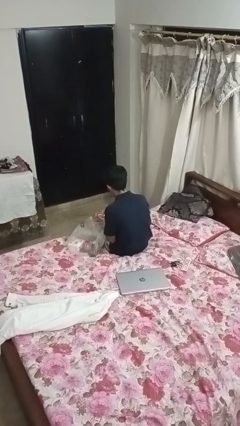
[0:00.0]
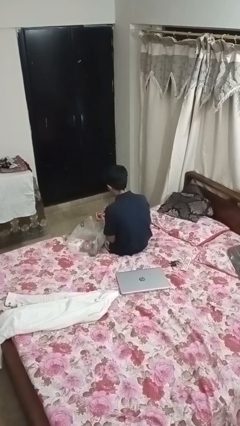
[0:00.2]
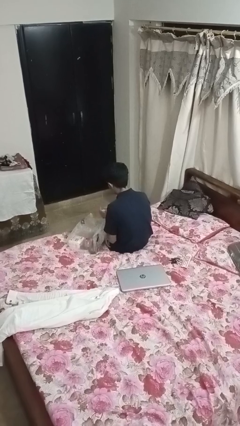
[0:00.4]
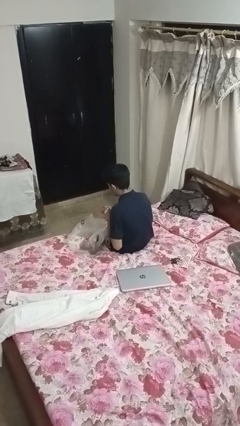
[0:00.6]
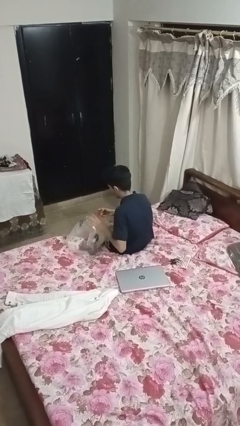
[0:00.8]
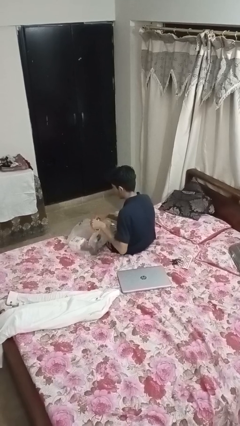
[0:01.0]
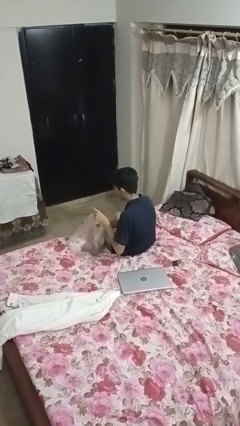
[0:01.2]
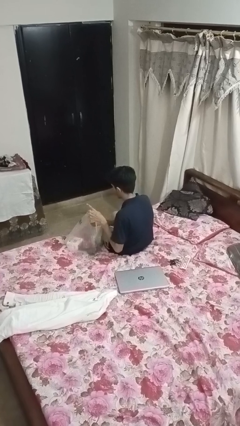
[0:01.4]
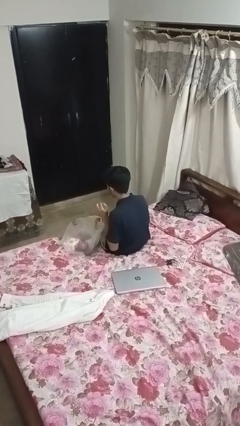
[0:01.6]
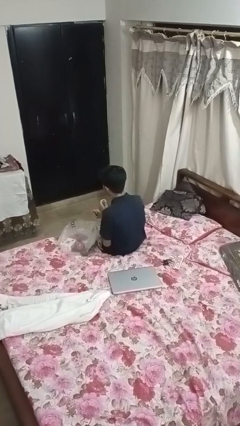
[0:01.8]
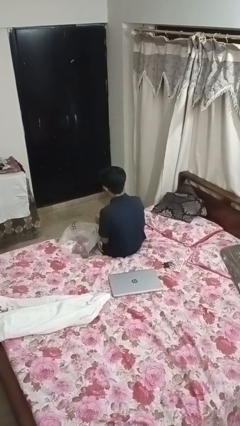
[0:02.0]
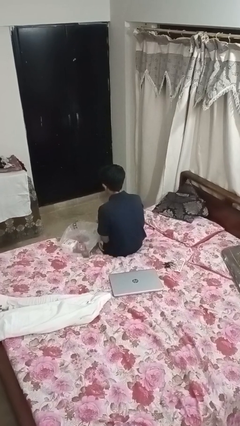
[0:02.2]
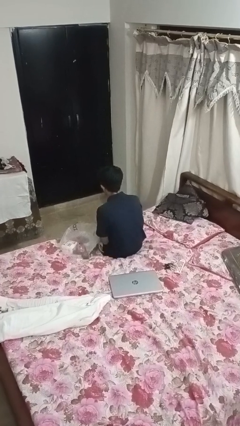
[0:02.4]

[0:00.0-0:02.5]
person puts object into bag

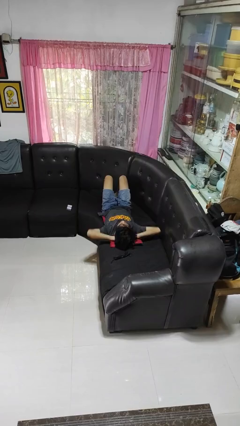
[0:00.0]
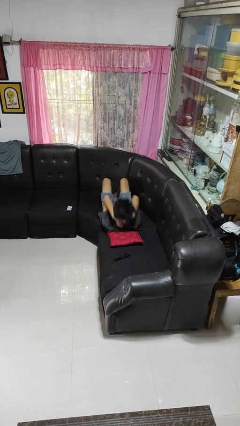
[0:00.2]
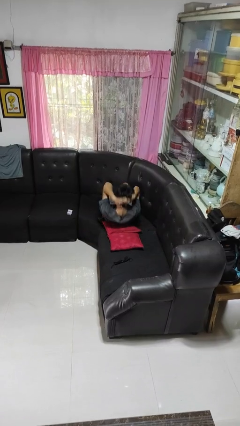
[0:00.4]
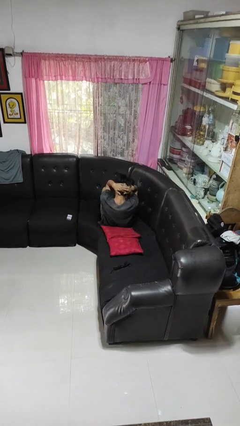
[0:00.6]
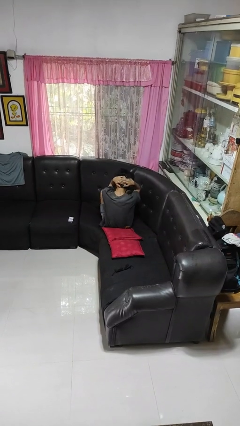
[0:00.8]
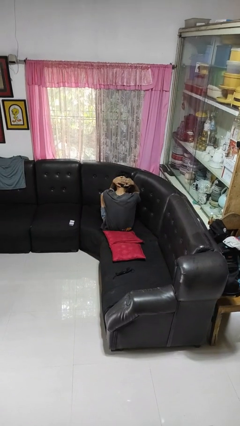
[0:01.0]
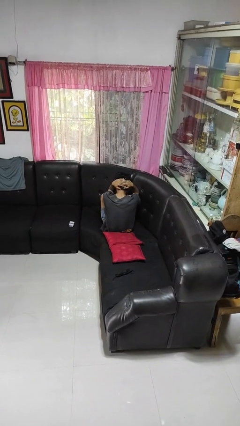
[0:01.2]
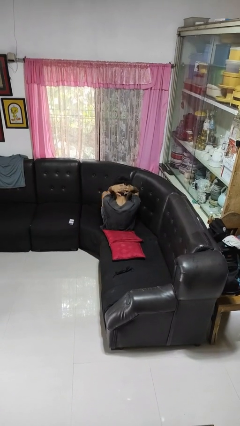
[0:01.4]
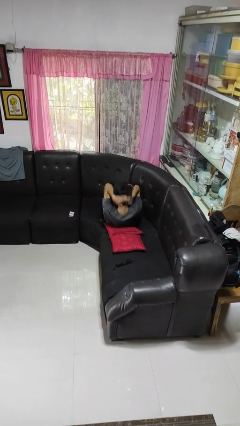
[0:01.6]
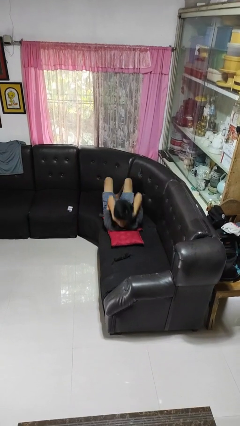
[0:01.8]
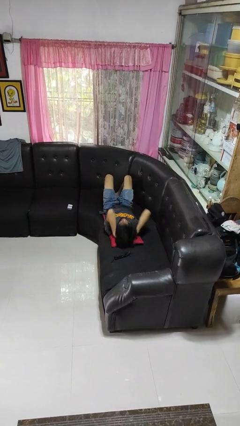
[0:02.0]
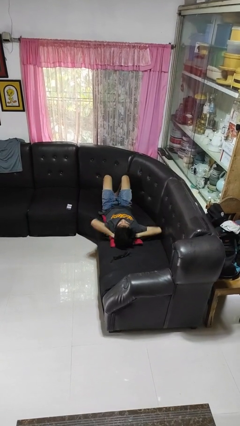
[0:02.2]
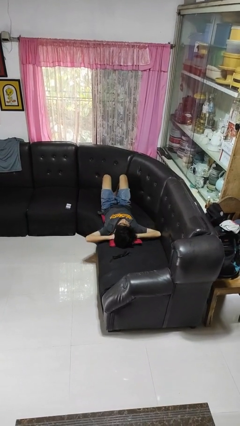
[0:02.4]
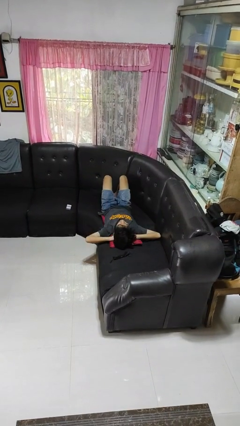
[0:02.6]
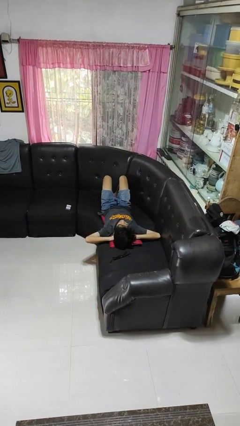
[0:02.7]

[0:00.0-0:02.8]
person exercises with situp

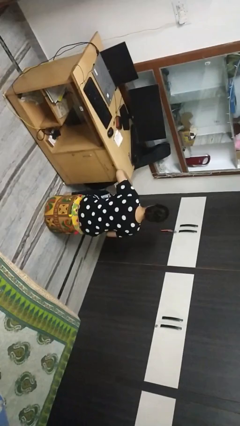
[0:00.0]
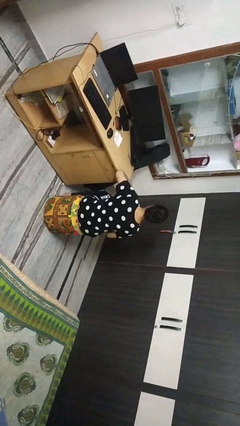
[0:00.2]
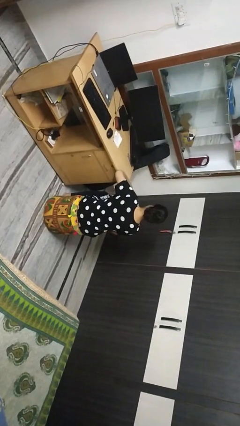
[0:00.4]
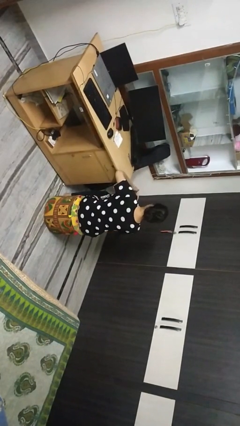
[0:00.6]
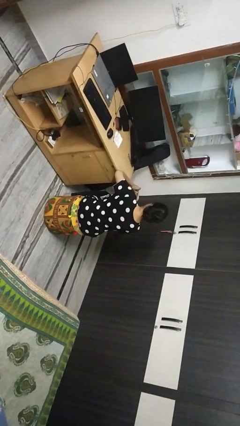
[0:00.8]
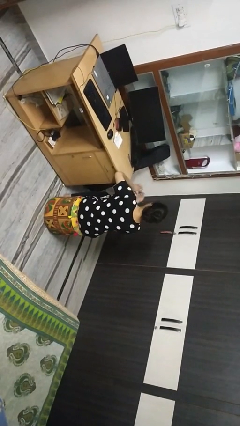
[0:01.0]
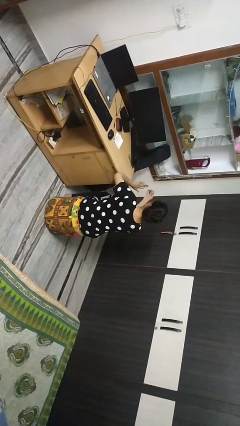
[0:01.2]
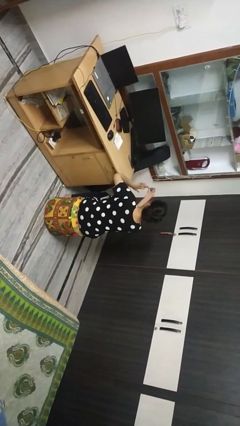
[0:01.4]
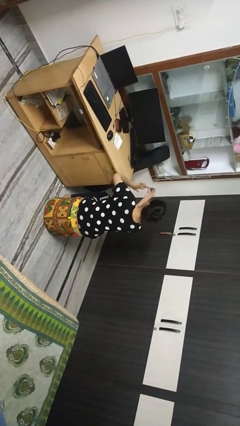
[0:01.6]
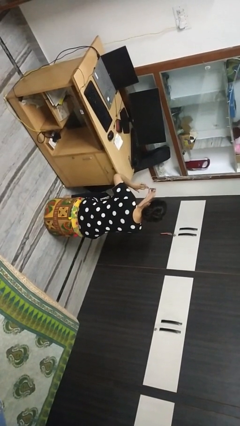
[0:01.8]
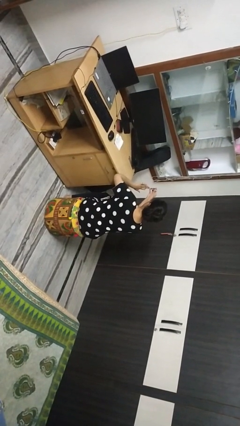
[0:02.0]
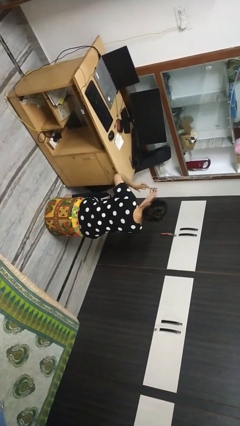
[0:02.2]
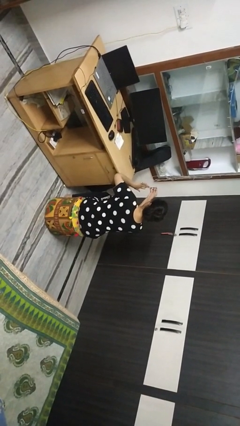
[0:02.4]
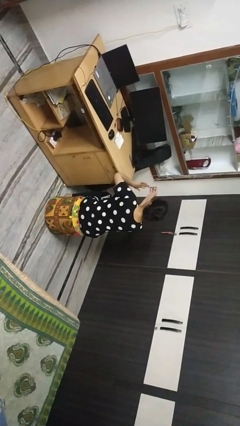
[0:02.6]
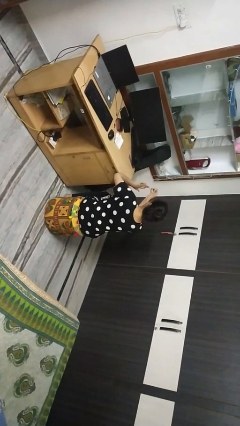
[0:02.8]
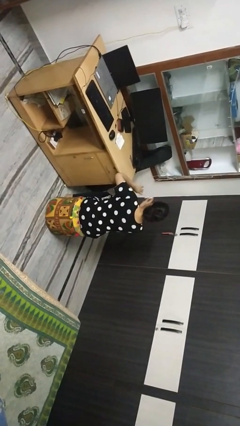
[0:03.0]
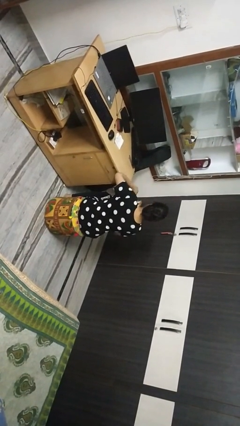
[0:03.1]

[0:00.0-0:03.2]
person clips fingernails

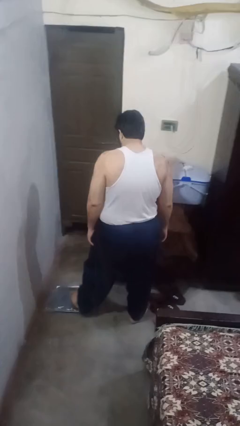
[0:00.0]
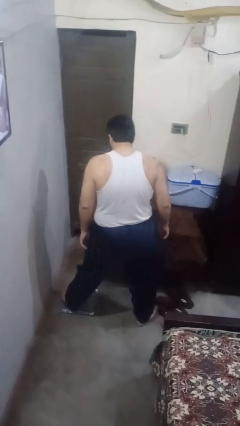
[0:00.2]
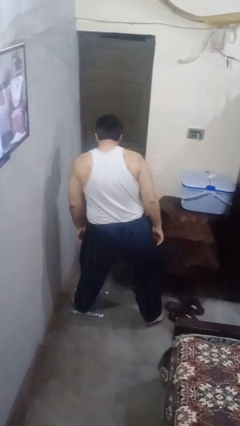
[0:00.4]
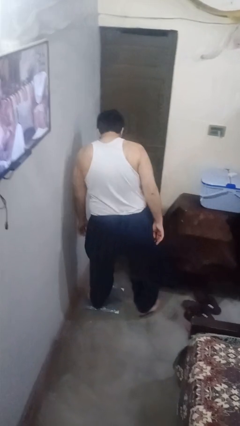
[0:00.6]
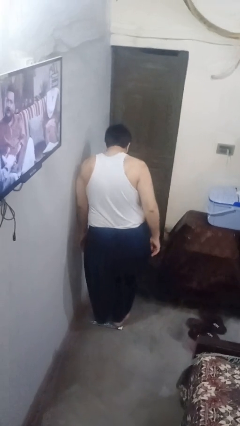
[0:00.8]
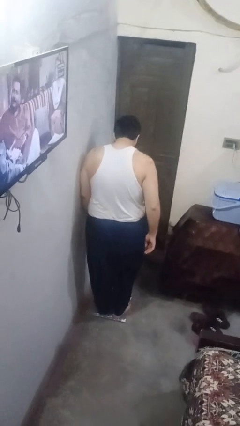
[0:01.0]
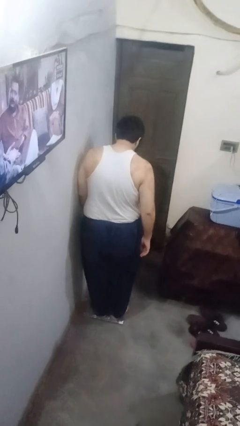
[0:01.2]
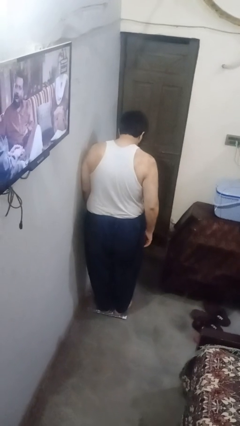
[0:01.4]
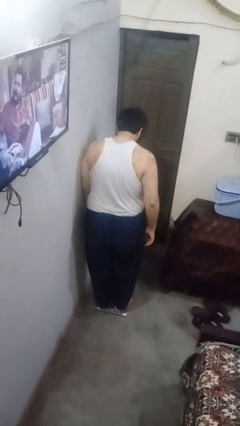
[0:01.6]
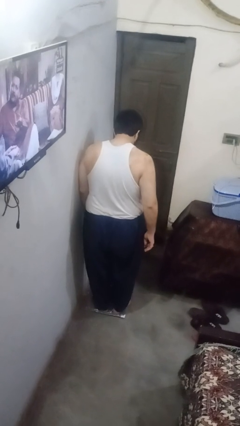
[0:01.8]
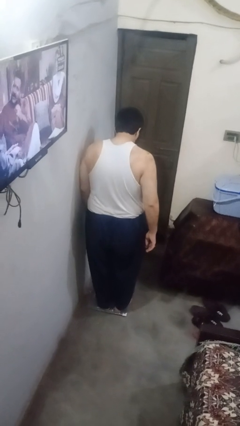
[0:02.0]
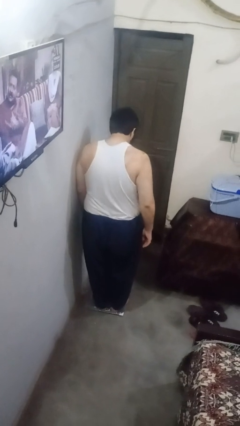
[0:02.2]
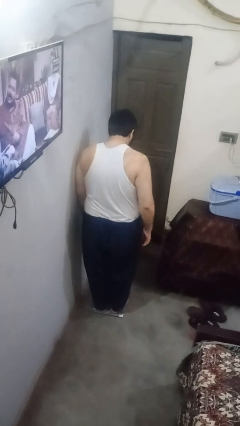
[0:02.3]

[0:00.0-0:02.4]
person uses bodyweight scale

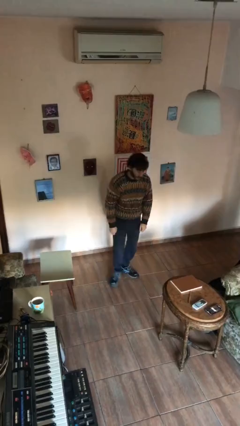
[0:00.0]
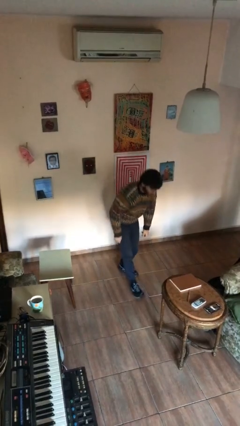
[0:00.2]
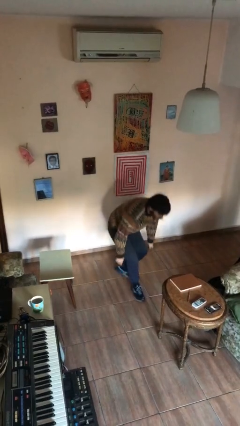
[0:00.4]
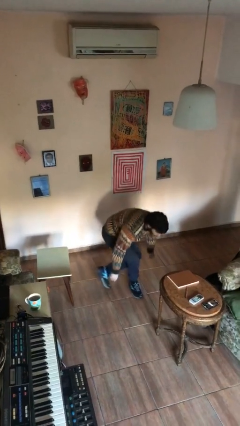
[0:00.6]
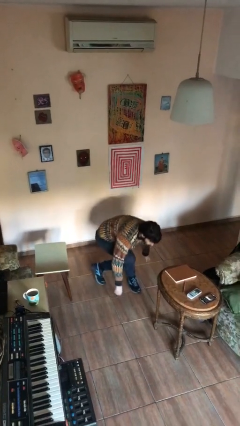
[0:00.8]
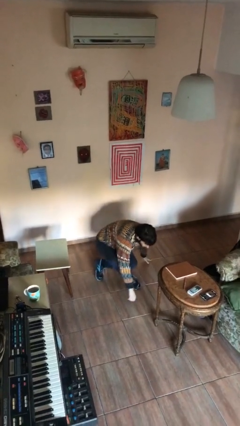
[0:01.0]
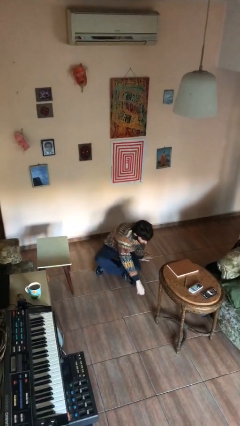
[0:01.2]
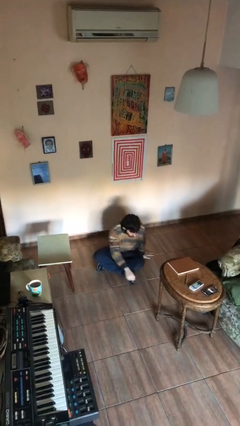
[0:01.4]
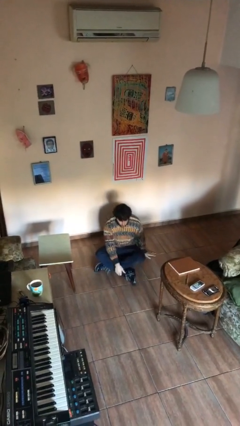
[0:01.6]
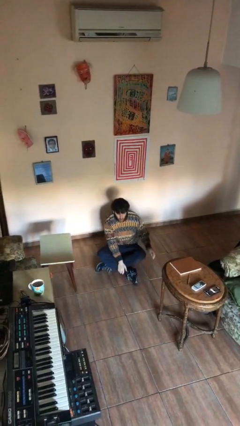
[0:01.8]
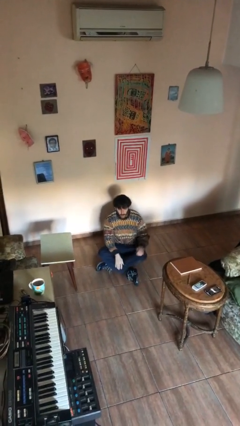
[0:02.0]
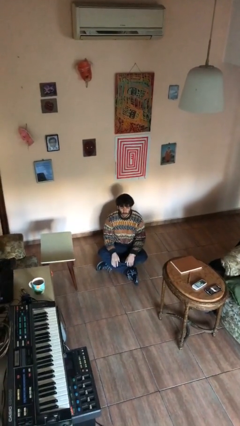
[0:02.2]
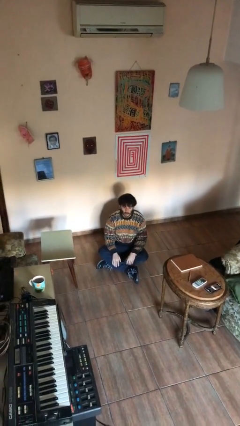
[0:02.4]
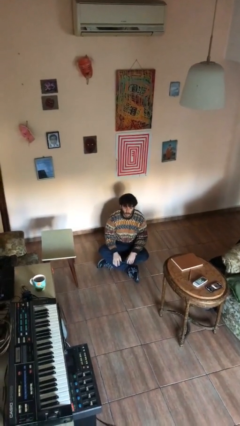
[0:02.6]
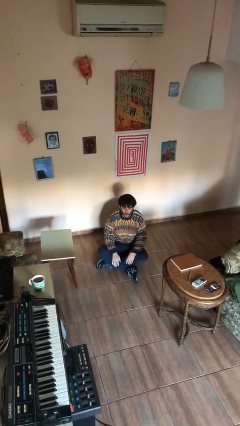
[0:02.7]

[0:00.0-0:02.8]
person sits crisscross

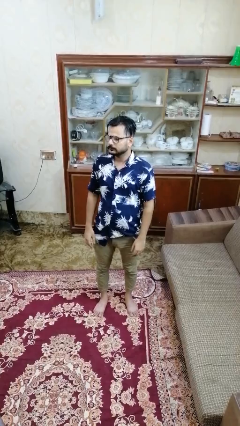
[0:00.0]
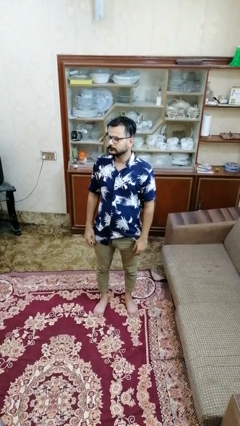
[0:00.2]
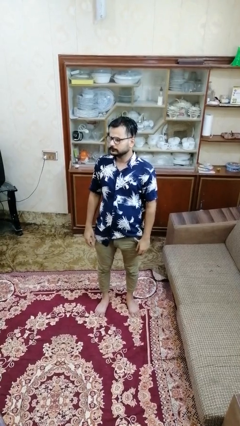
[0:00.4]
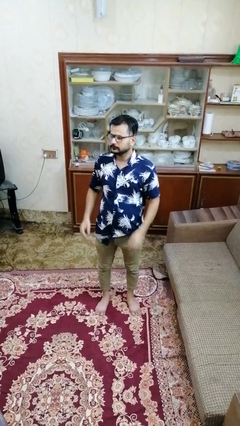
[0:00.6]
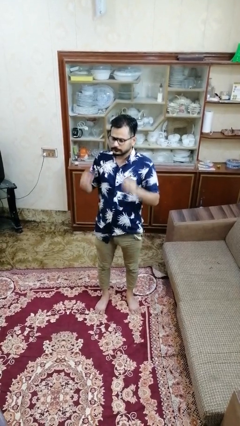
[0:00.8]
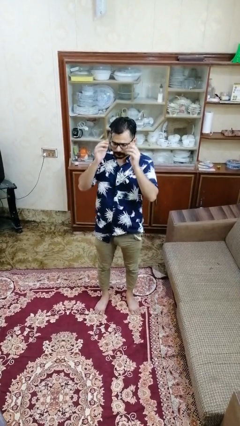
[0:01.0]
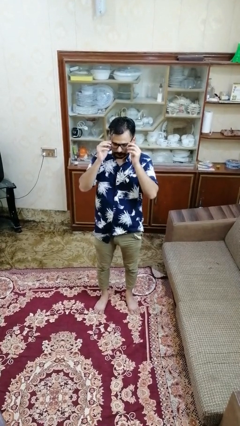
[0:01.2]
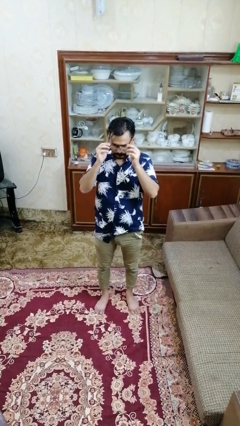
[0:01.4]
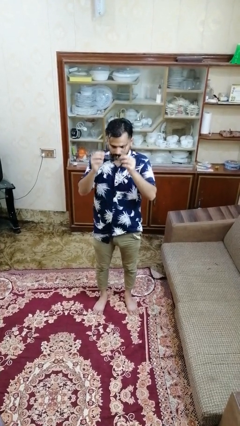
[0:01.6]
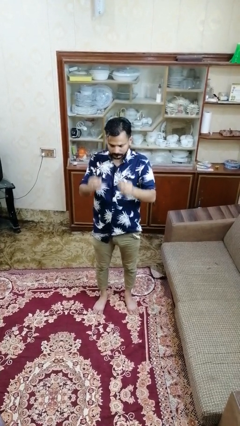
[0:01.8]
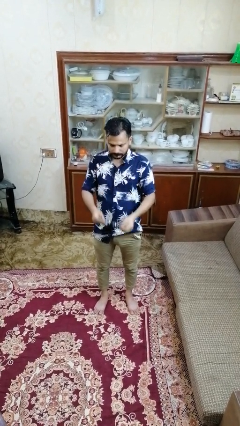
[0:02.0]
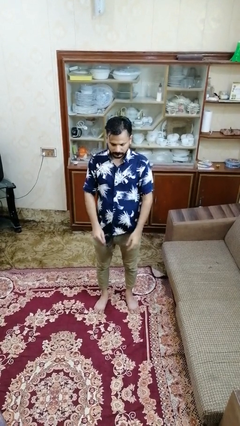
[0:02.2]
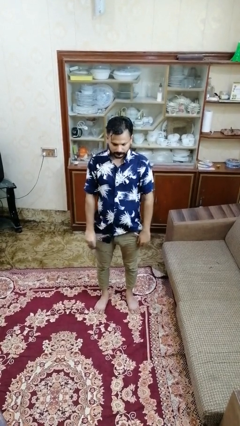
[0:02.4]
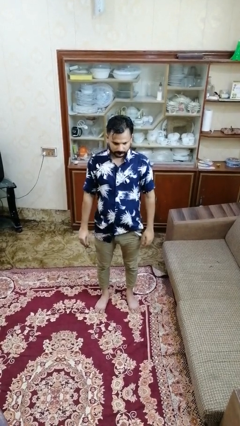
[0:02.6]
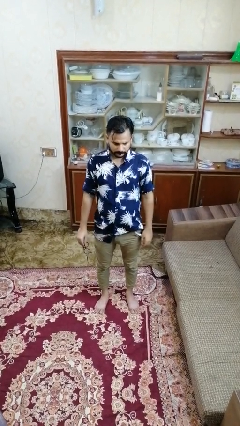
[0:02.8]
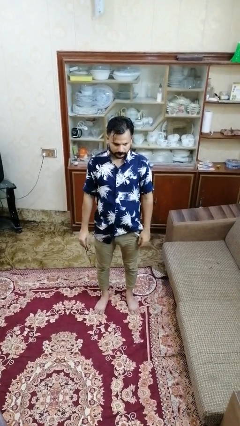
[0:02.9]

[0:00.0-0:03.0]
person takes off glasses

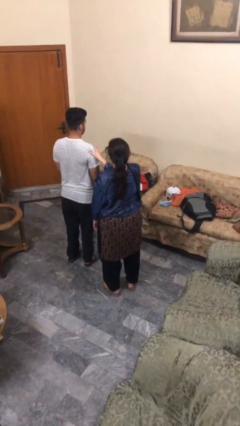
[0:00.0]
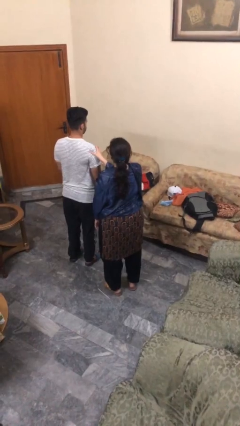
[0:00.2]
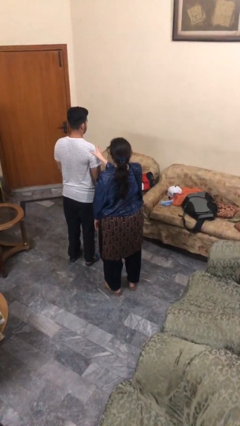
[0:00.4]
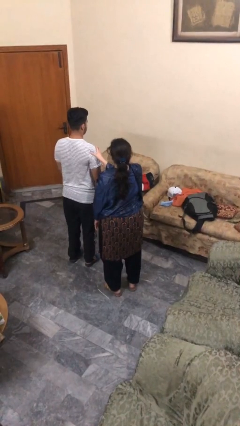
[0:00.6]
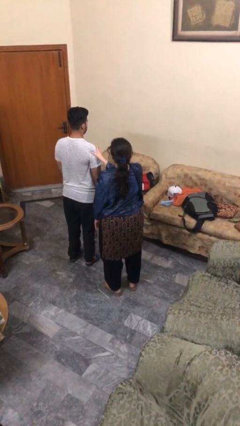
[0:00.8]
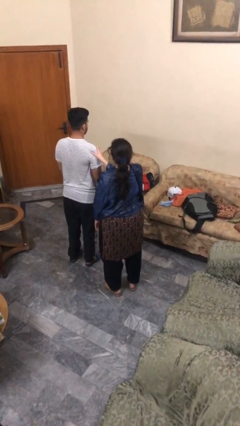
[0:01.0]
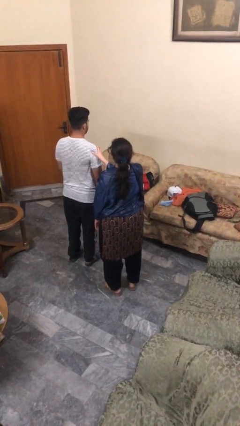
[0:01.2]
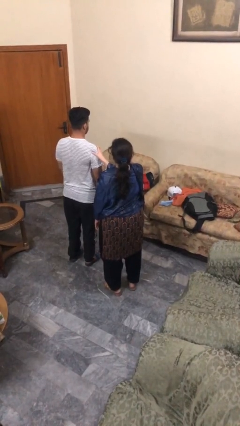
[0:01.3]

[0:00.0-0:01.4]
person grabs person by shoulder
